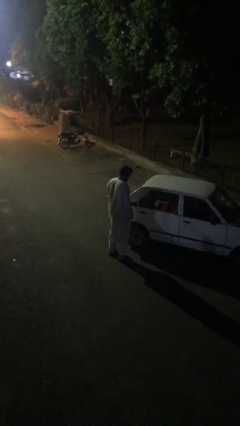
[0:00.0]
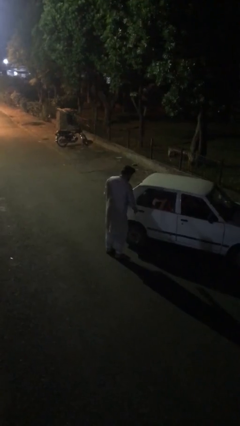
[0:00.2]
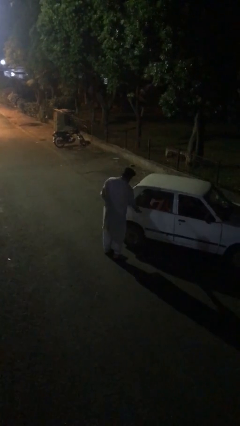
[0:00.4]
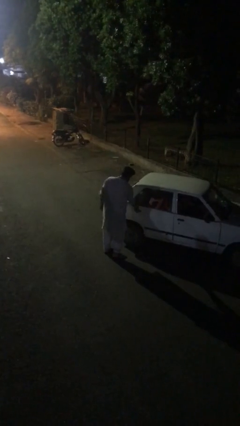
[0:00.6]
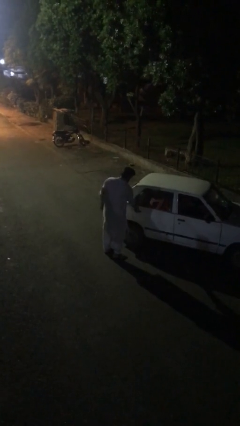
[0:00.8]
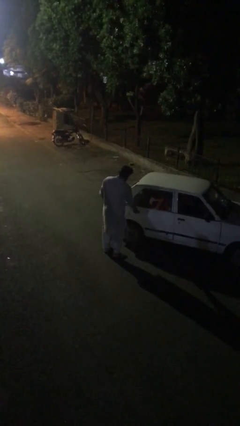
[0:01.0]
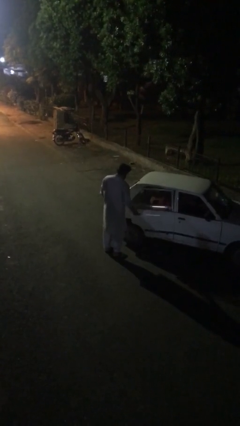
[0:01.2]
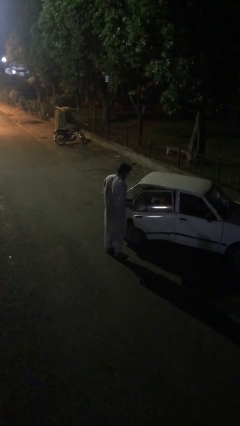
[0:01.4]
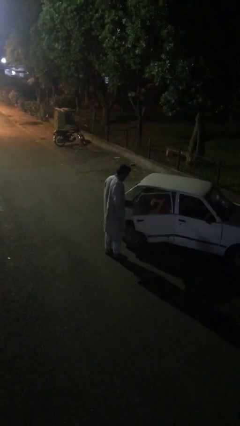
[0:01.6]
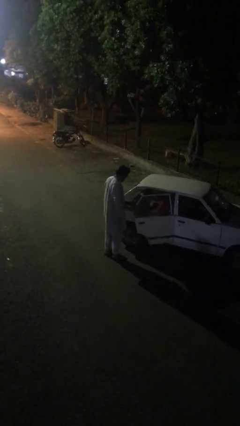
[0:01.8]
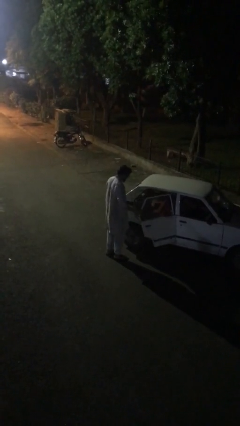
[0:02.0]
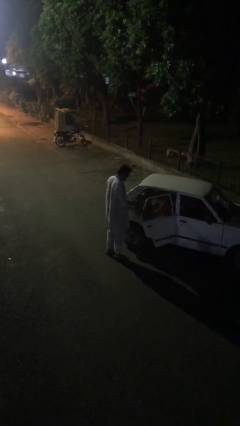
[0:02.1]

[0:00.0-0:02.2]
person opens car door

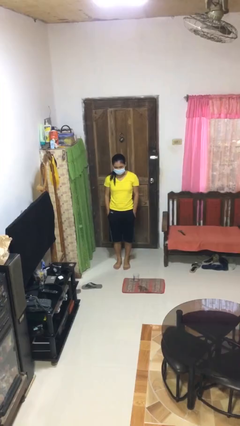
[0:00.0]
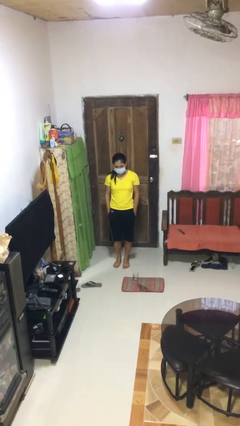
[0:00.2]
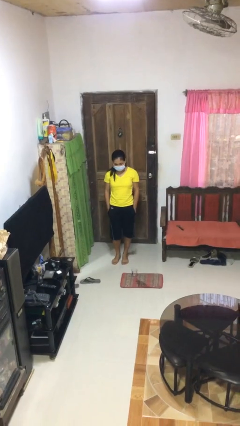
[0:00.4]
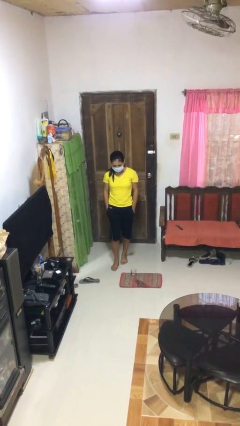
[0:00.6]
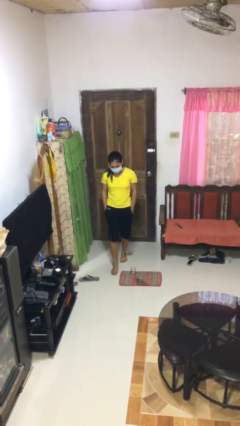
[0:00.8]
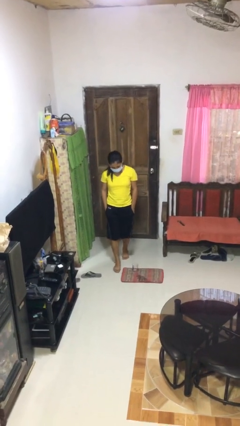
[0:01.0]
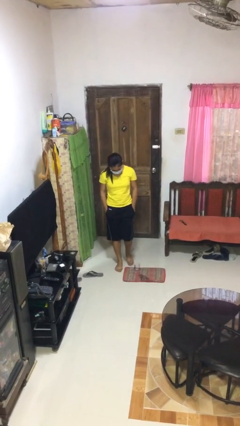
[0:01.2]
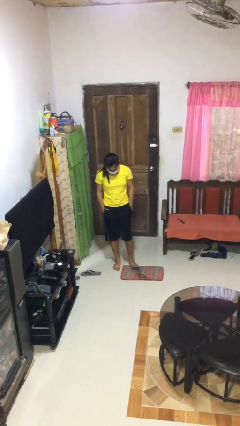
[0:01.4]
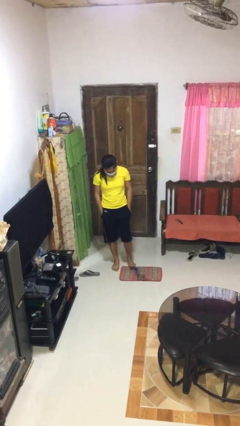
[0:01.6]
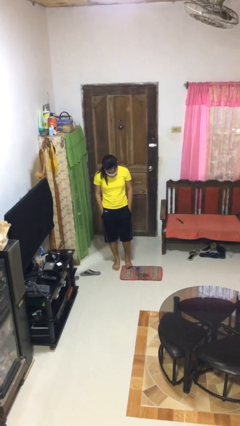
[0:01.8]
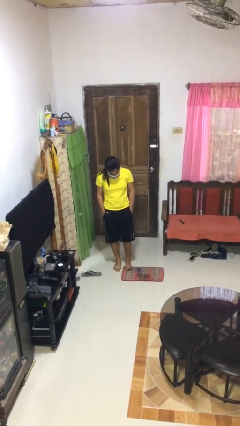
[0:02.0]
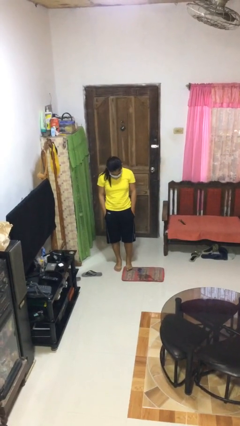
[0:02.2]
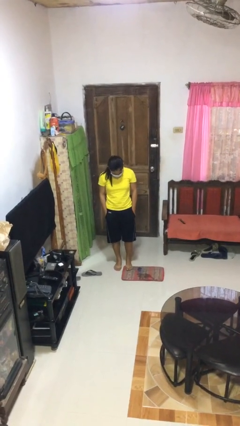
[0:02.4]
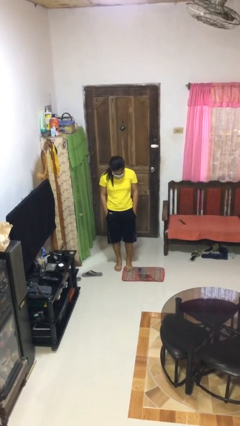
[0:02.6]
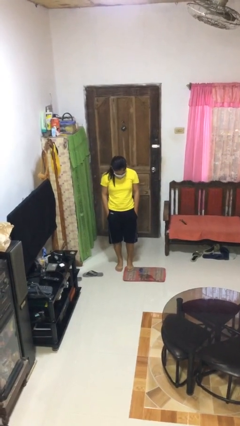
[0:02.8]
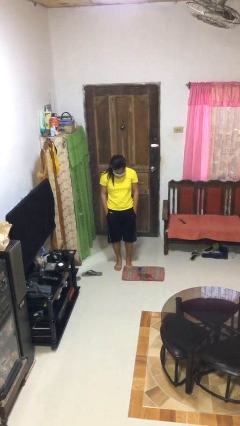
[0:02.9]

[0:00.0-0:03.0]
person spills on floor

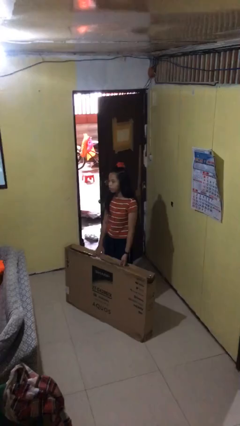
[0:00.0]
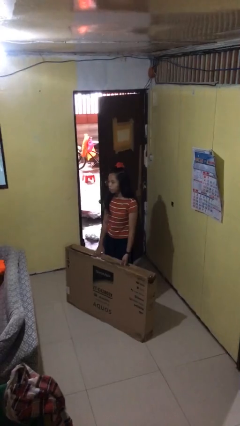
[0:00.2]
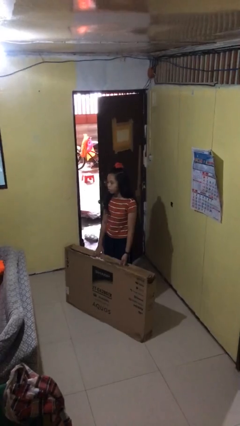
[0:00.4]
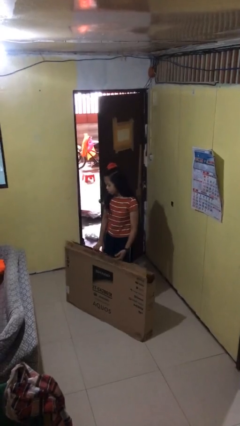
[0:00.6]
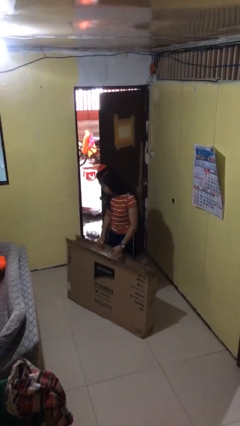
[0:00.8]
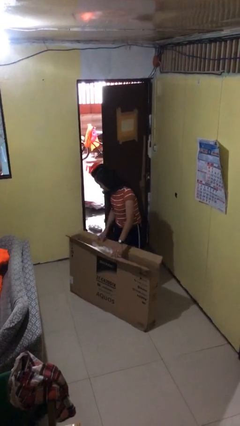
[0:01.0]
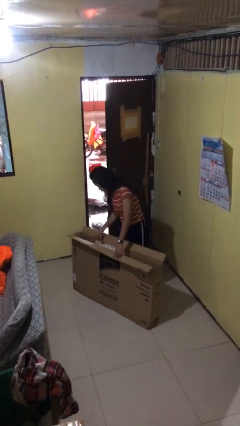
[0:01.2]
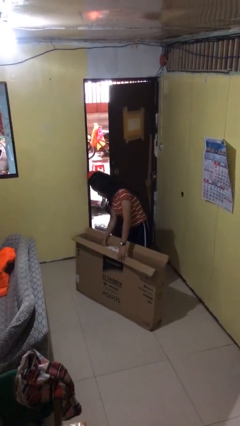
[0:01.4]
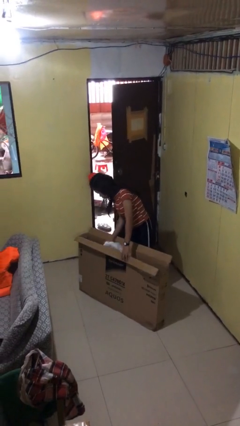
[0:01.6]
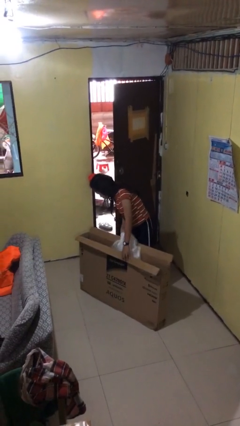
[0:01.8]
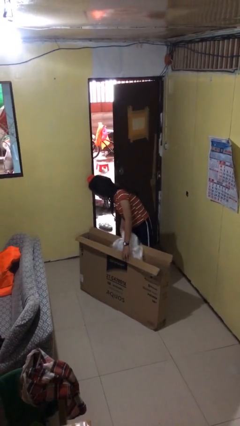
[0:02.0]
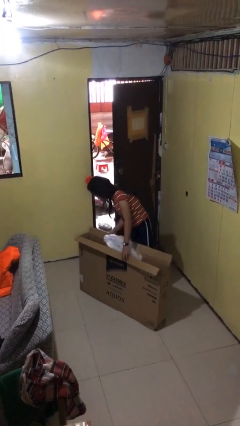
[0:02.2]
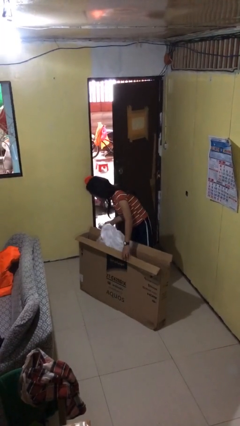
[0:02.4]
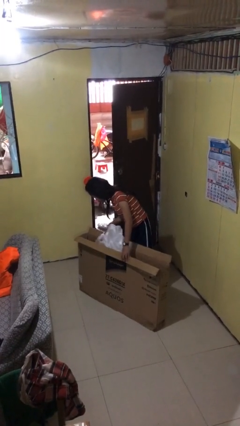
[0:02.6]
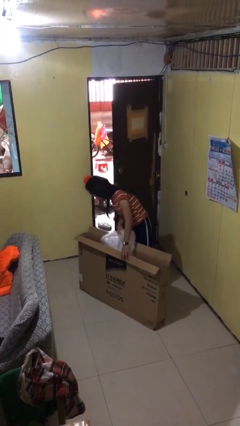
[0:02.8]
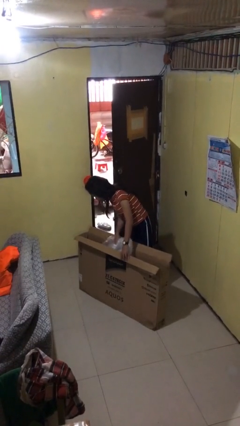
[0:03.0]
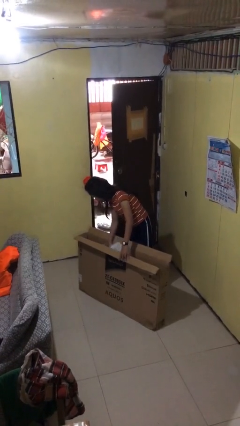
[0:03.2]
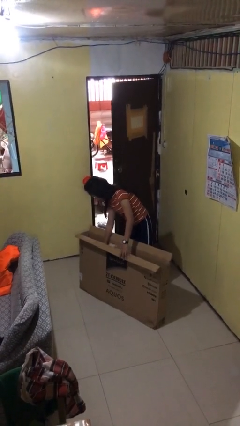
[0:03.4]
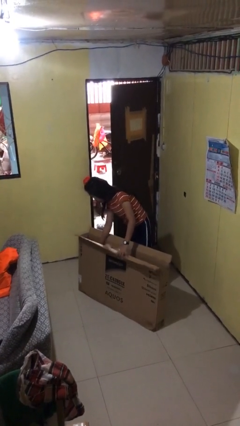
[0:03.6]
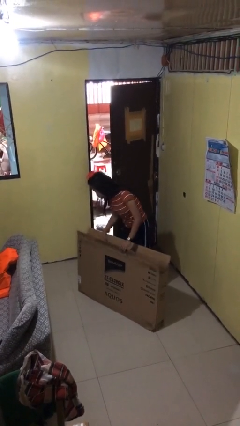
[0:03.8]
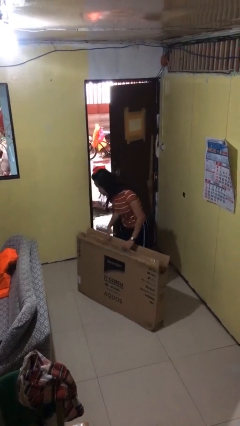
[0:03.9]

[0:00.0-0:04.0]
person searches in box

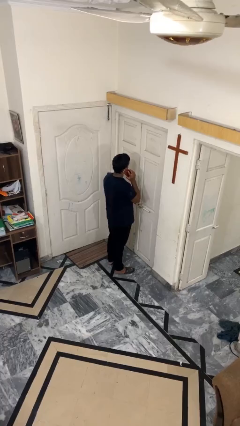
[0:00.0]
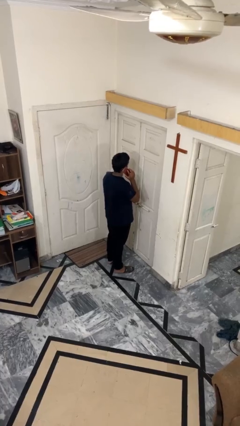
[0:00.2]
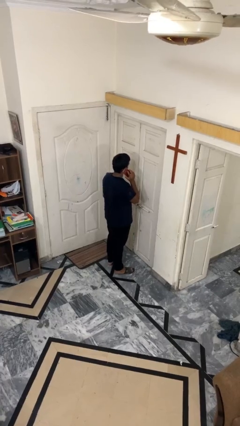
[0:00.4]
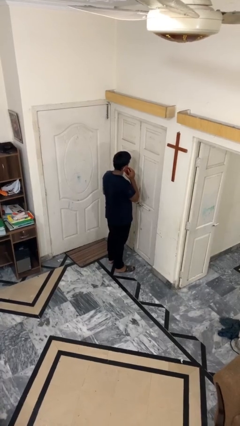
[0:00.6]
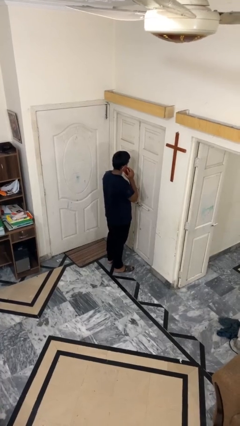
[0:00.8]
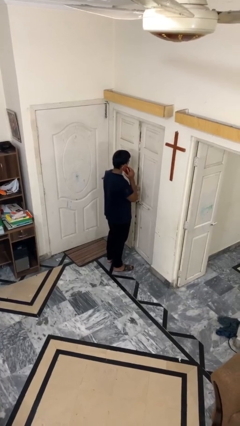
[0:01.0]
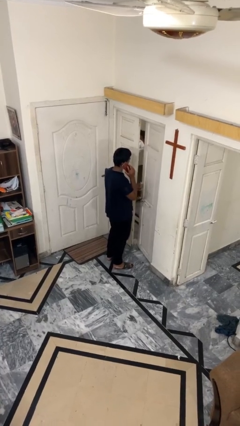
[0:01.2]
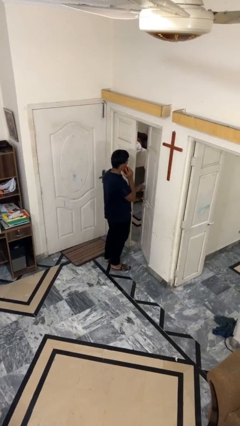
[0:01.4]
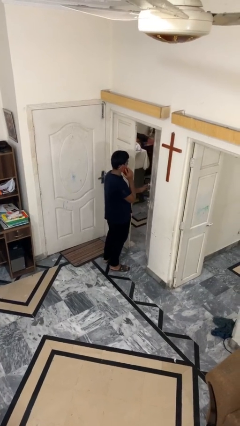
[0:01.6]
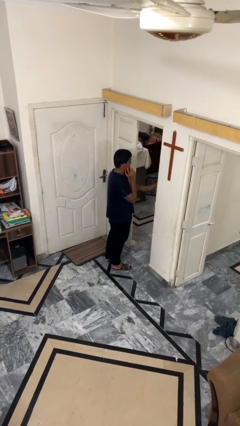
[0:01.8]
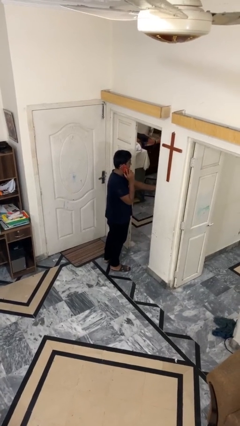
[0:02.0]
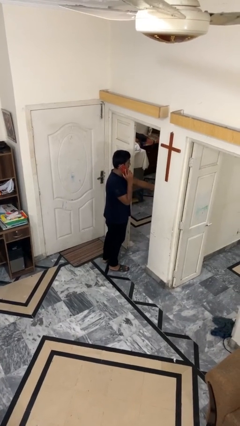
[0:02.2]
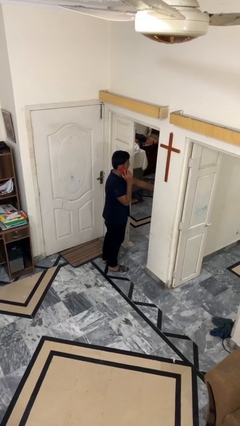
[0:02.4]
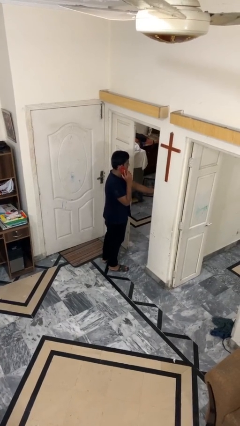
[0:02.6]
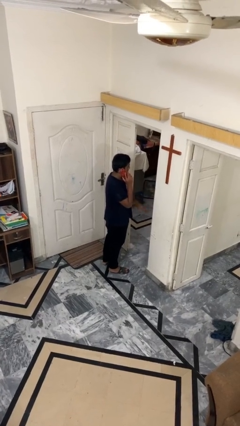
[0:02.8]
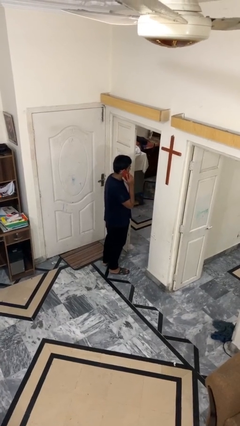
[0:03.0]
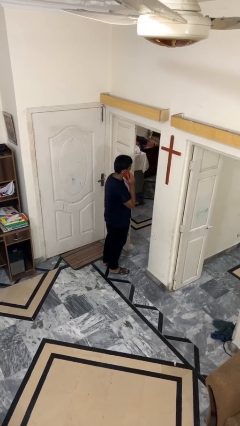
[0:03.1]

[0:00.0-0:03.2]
person opens facility door

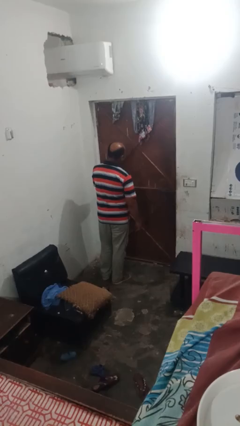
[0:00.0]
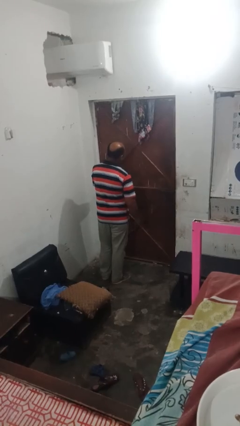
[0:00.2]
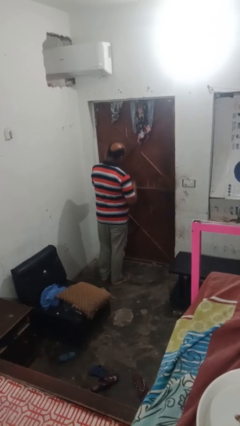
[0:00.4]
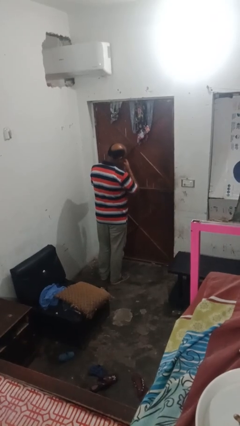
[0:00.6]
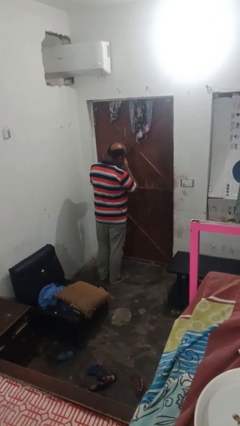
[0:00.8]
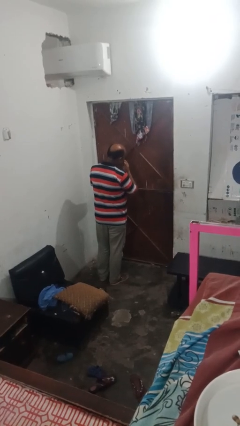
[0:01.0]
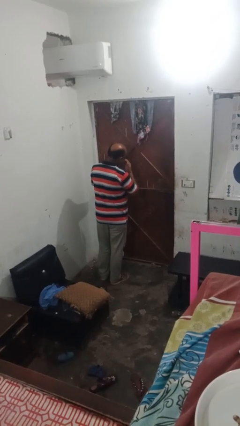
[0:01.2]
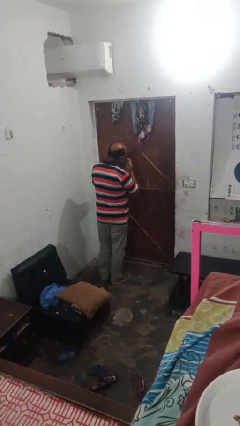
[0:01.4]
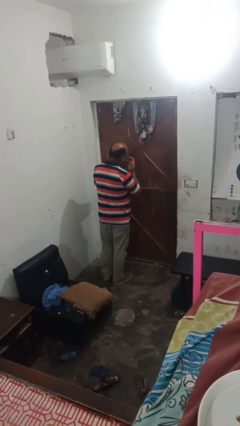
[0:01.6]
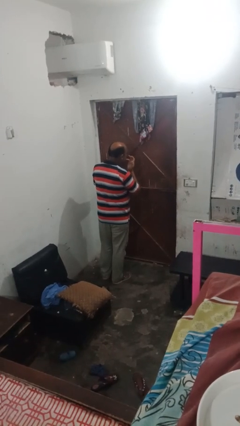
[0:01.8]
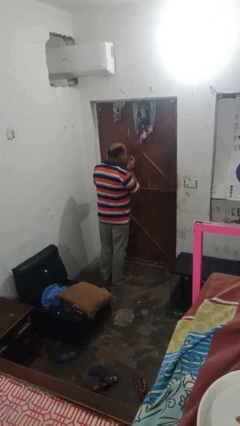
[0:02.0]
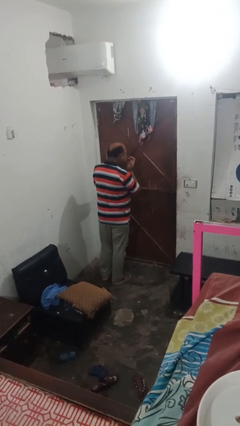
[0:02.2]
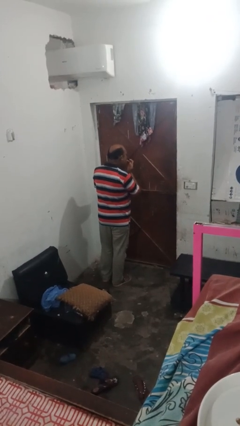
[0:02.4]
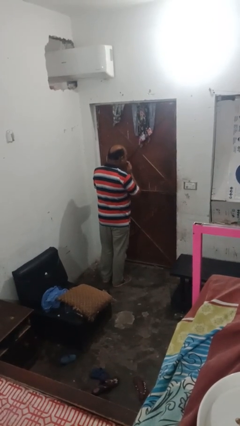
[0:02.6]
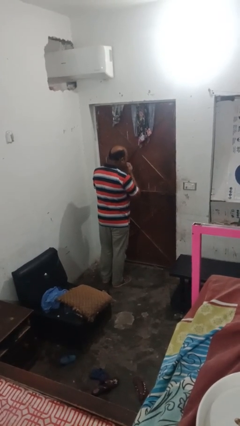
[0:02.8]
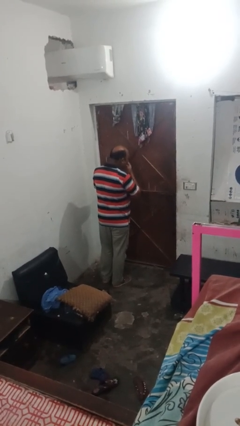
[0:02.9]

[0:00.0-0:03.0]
person licks fingers

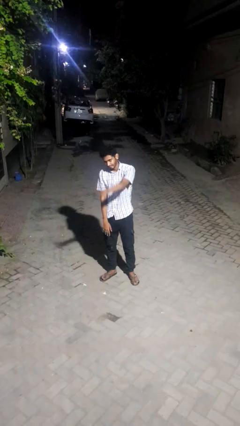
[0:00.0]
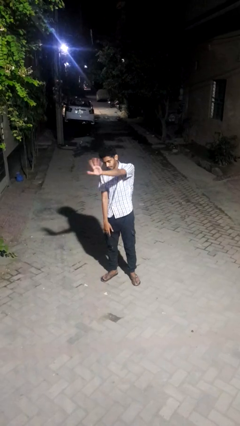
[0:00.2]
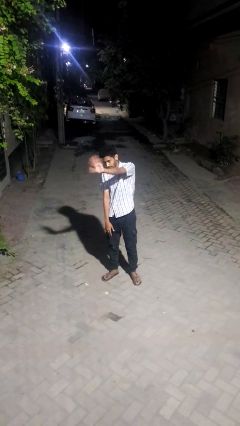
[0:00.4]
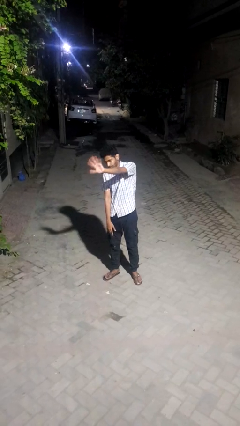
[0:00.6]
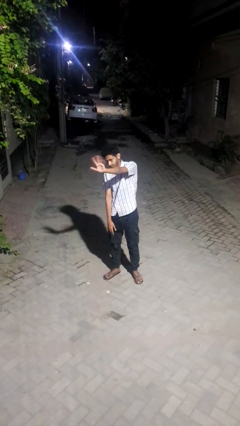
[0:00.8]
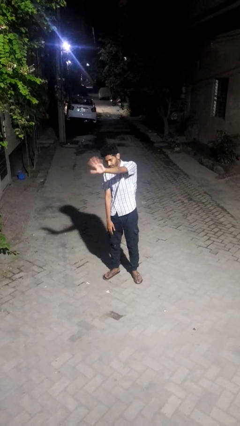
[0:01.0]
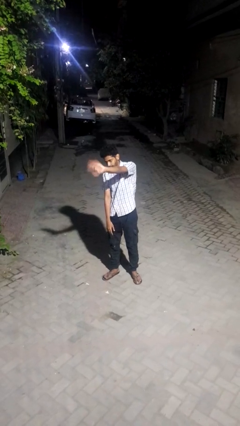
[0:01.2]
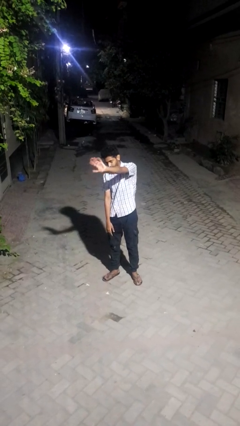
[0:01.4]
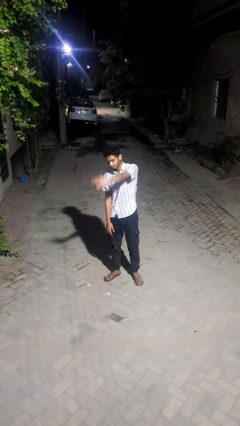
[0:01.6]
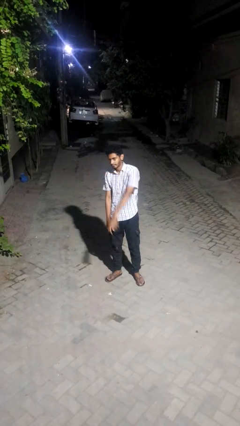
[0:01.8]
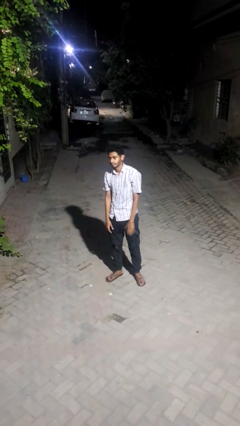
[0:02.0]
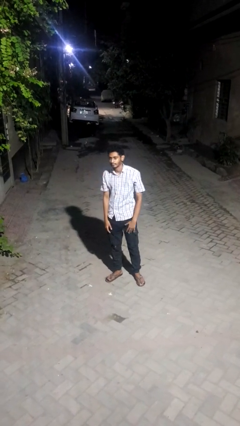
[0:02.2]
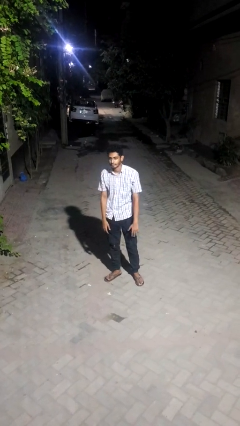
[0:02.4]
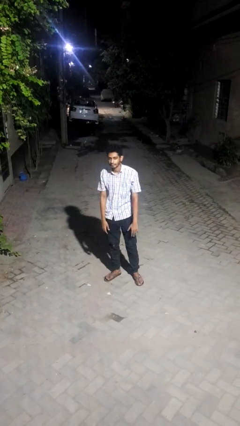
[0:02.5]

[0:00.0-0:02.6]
person waves at person
